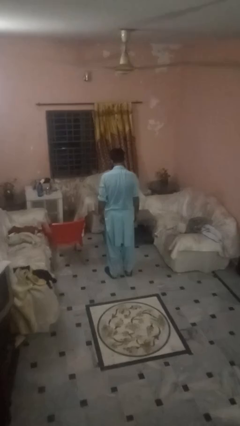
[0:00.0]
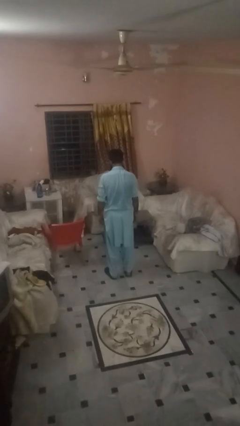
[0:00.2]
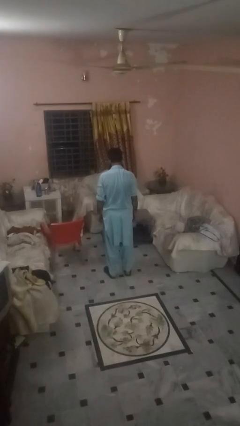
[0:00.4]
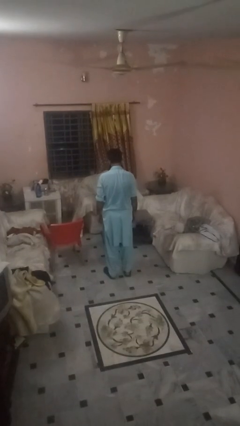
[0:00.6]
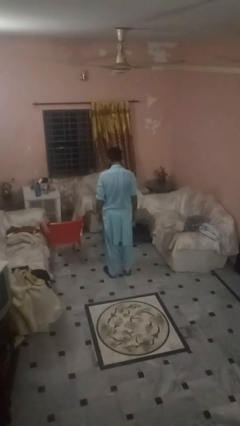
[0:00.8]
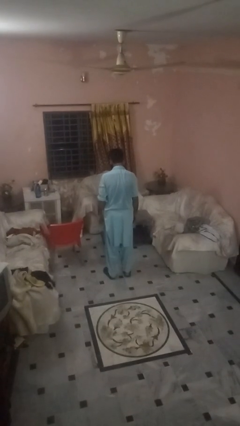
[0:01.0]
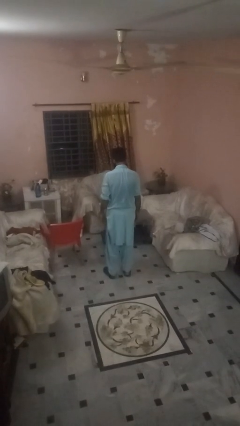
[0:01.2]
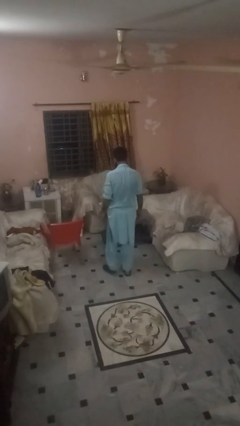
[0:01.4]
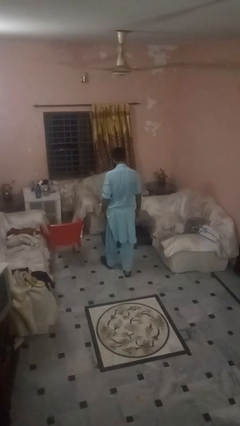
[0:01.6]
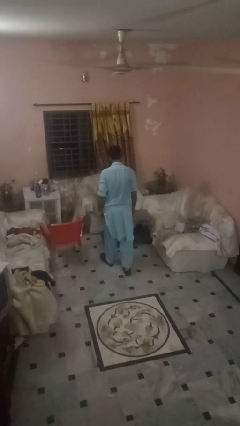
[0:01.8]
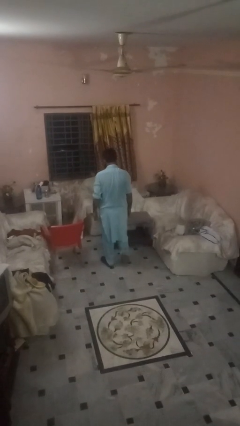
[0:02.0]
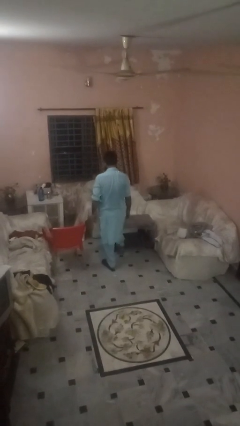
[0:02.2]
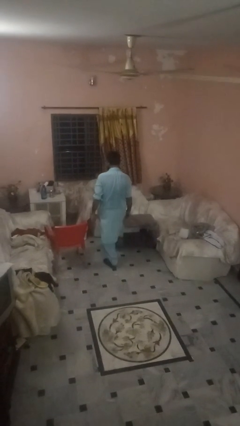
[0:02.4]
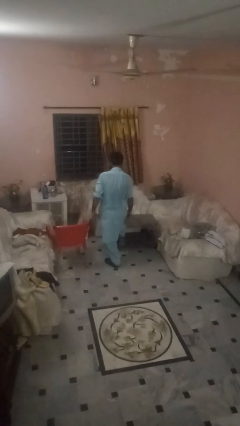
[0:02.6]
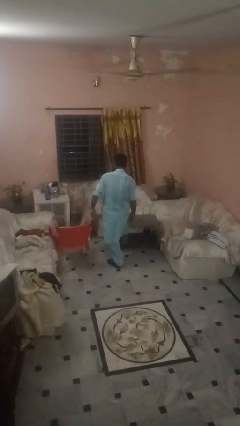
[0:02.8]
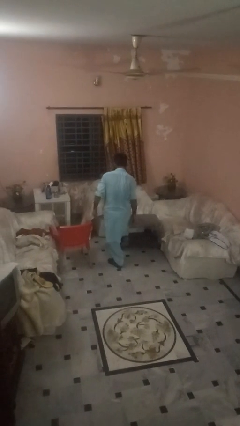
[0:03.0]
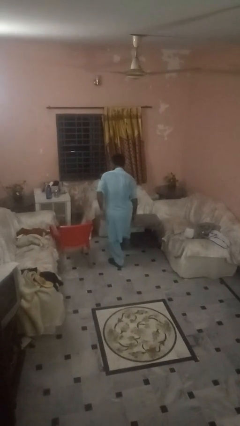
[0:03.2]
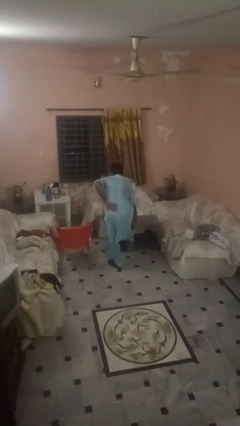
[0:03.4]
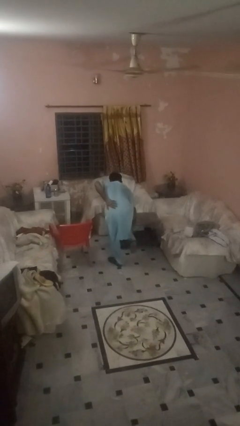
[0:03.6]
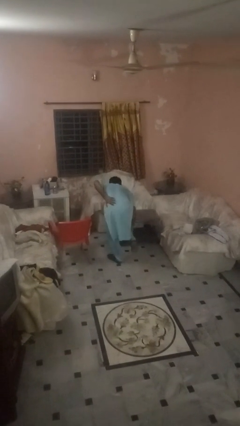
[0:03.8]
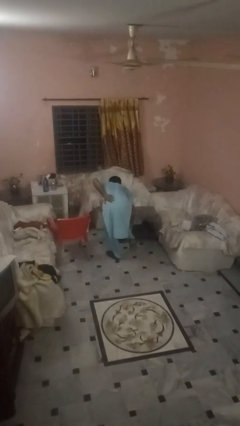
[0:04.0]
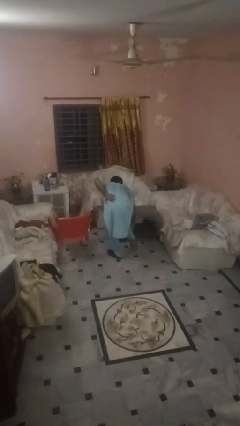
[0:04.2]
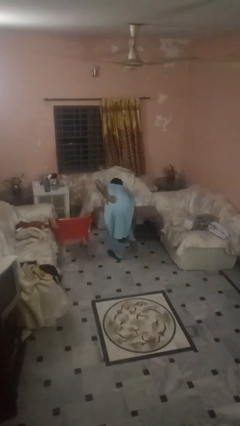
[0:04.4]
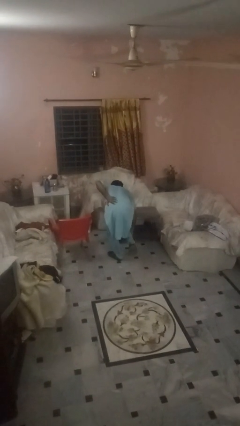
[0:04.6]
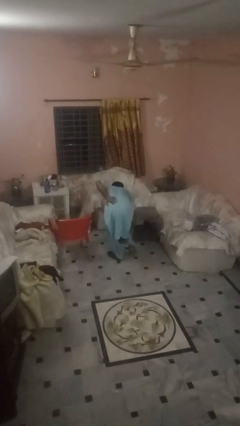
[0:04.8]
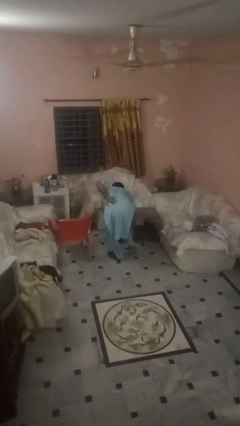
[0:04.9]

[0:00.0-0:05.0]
person bumps into table

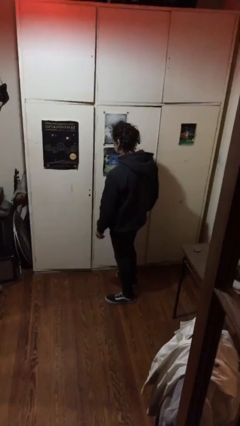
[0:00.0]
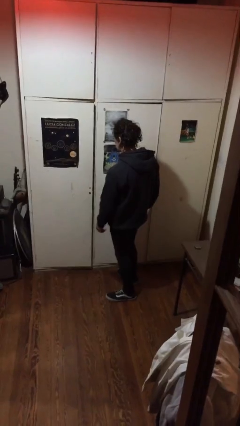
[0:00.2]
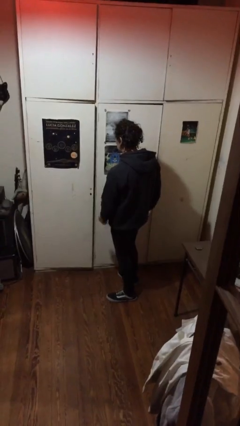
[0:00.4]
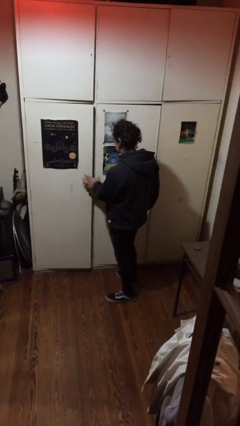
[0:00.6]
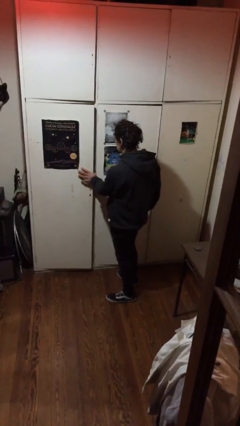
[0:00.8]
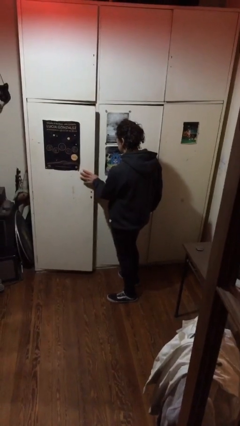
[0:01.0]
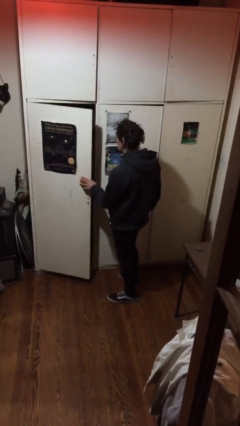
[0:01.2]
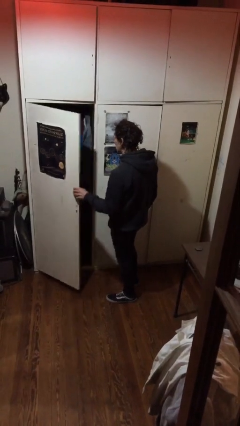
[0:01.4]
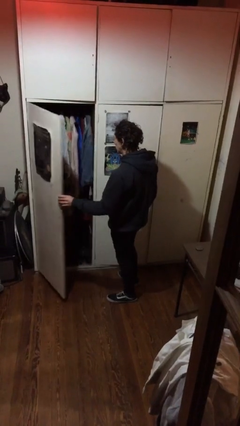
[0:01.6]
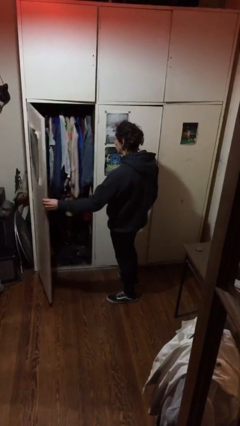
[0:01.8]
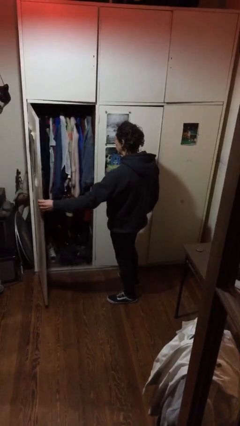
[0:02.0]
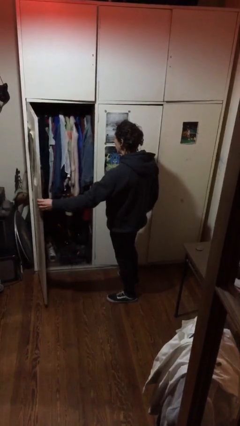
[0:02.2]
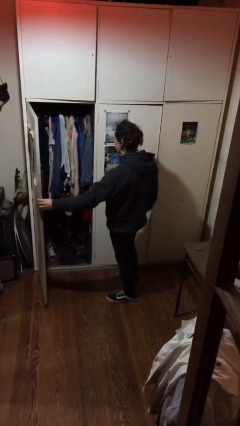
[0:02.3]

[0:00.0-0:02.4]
person opens closet door

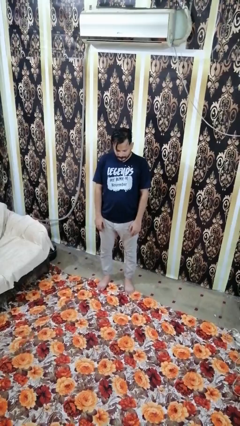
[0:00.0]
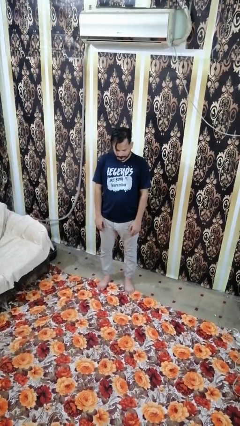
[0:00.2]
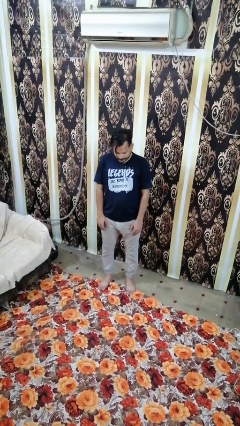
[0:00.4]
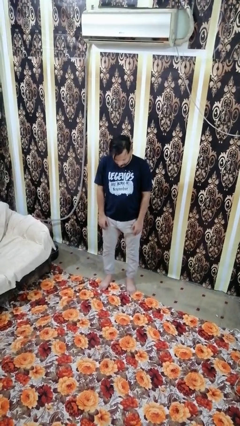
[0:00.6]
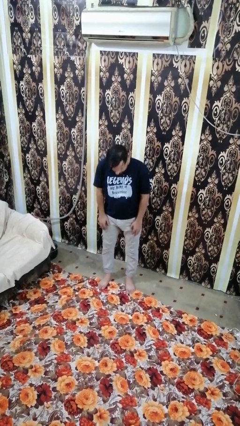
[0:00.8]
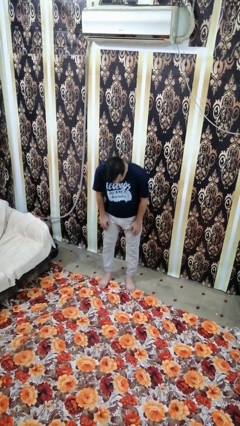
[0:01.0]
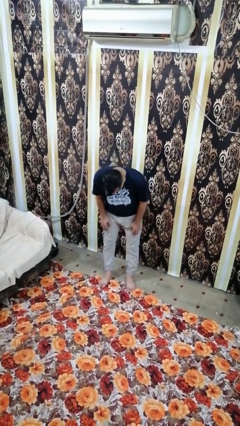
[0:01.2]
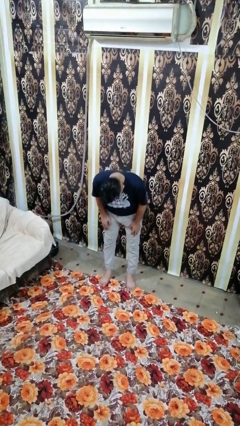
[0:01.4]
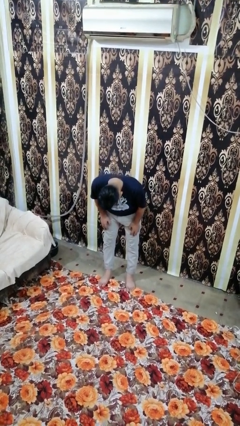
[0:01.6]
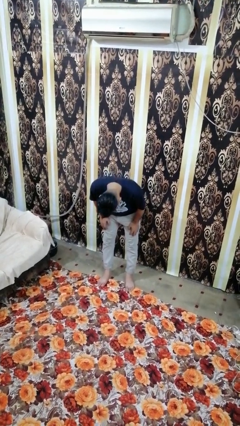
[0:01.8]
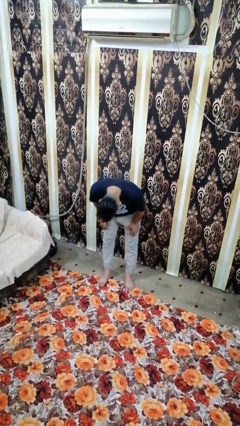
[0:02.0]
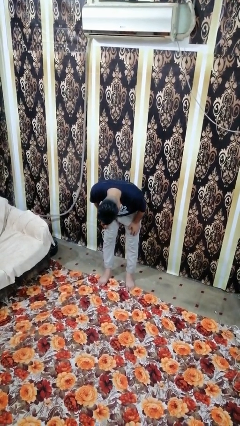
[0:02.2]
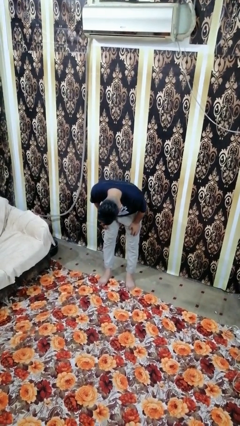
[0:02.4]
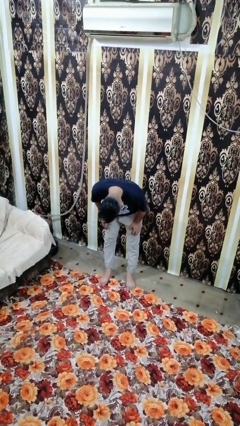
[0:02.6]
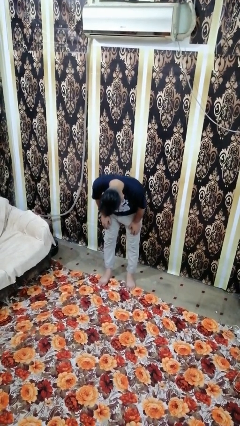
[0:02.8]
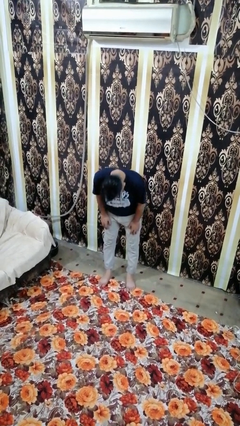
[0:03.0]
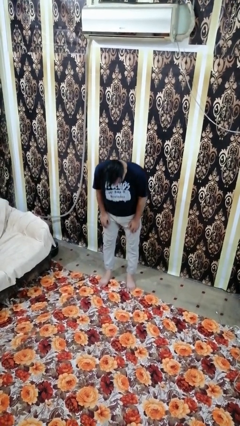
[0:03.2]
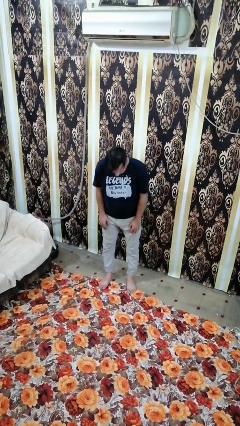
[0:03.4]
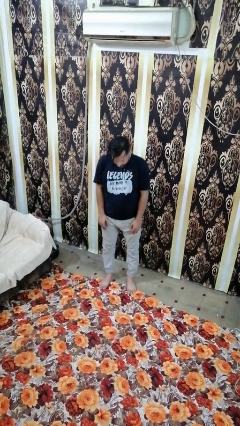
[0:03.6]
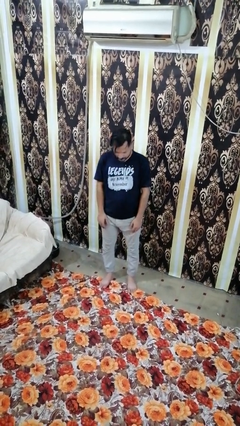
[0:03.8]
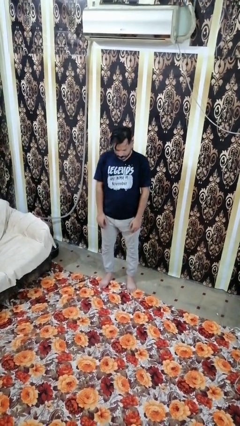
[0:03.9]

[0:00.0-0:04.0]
person bows

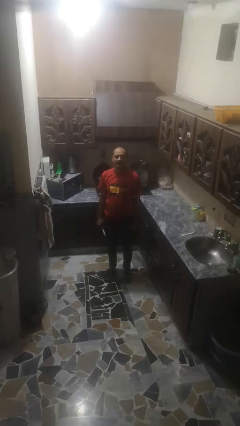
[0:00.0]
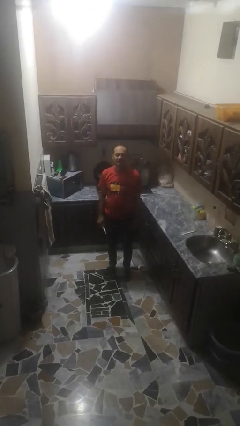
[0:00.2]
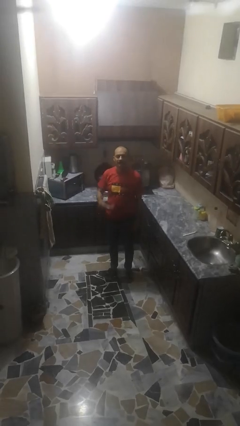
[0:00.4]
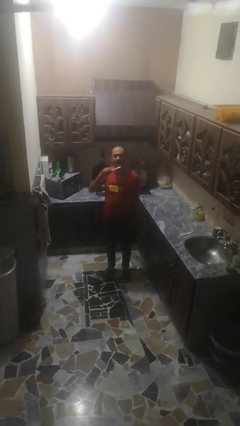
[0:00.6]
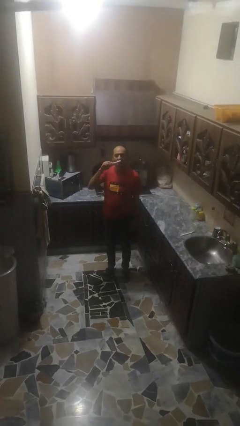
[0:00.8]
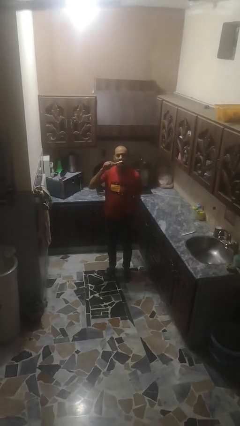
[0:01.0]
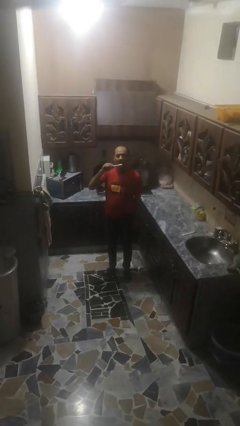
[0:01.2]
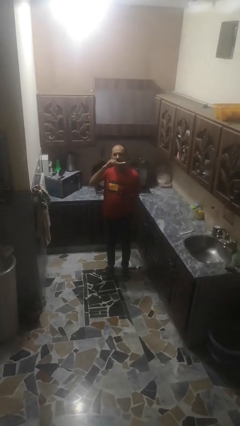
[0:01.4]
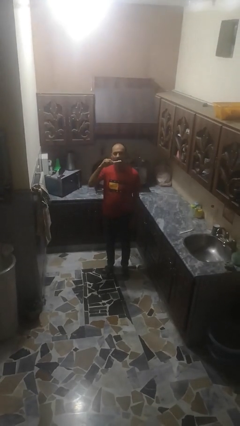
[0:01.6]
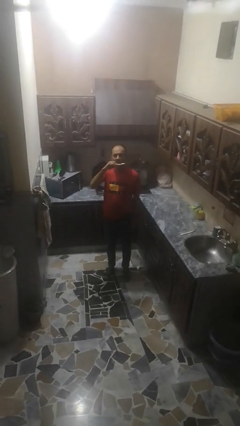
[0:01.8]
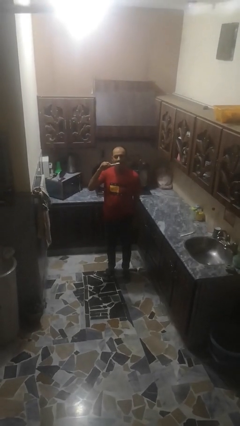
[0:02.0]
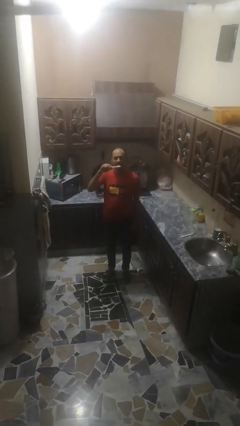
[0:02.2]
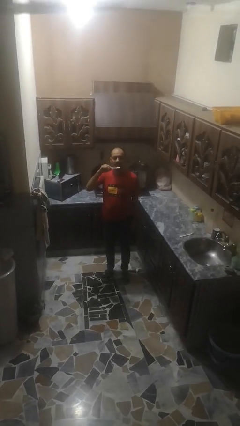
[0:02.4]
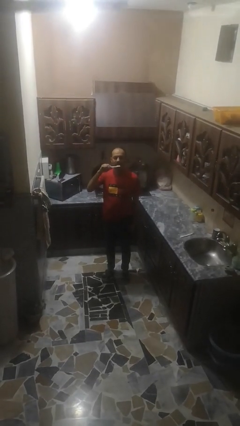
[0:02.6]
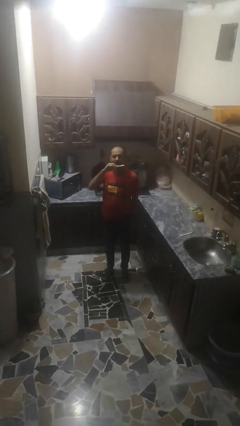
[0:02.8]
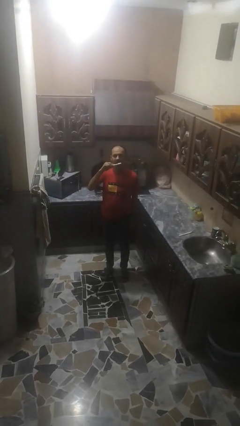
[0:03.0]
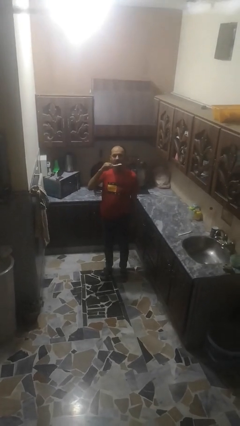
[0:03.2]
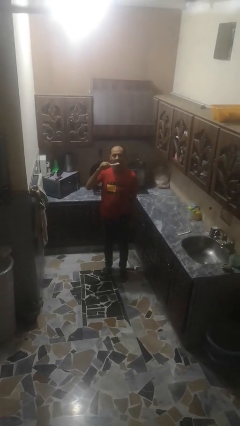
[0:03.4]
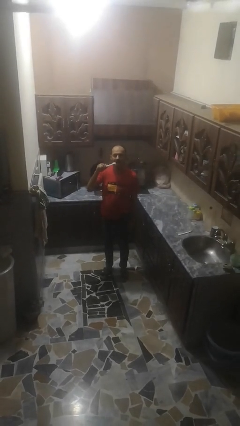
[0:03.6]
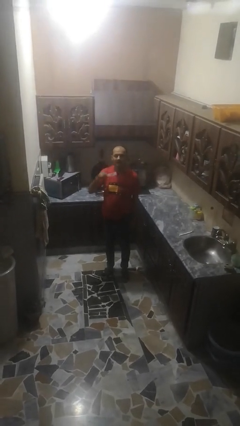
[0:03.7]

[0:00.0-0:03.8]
person brushes teeth

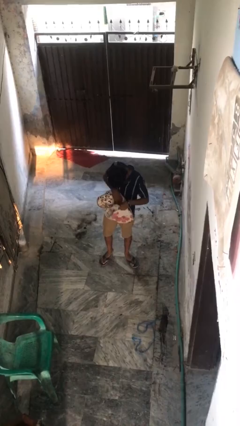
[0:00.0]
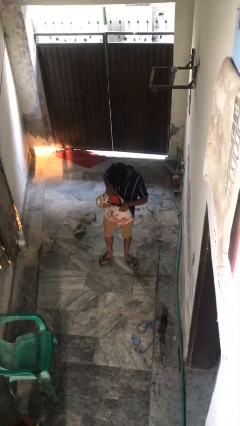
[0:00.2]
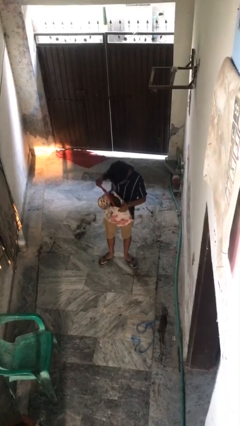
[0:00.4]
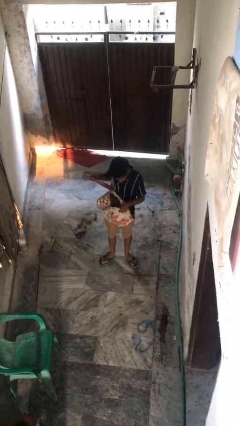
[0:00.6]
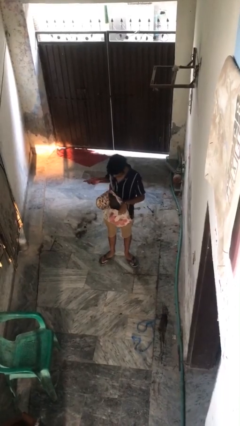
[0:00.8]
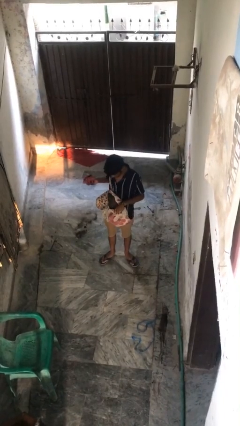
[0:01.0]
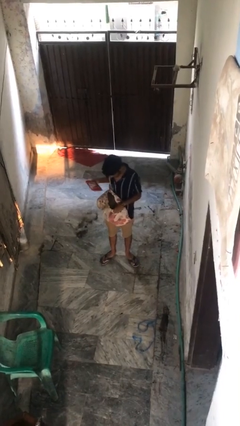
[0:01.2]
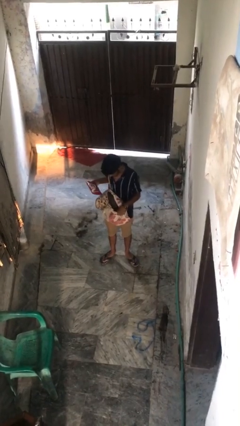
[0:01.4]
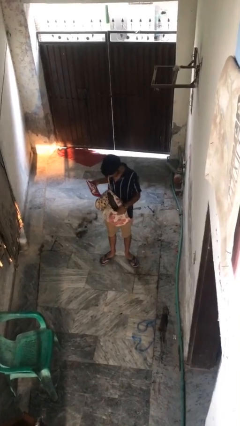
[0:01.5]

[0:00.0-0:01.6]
person takes object from backpack

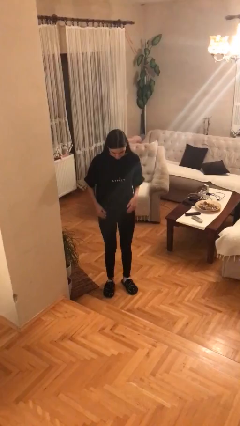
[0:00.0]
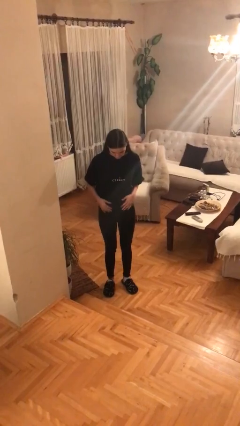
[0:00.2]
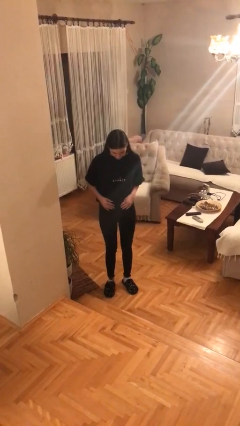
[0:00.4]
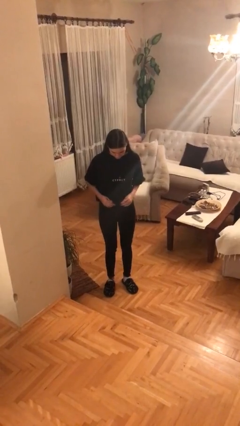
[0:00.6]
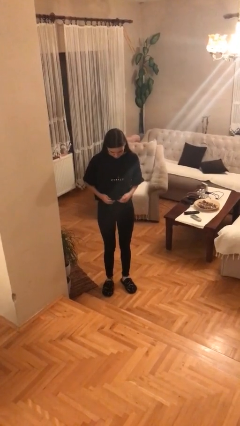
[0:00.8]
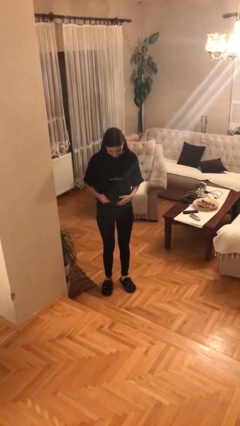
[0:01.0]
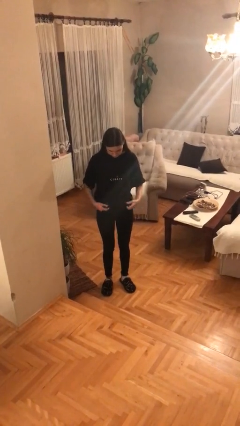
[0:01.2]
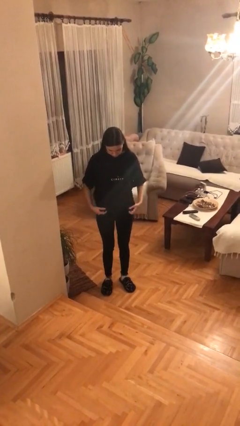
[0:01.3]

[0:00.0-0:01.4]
person untucks shirt
